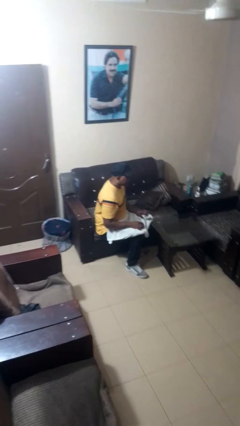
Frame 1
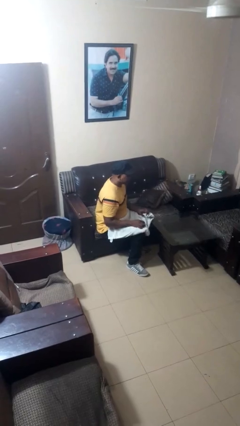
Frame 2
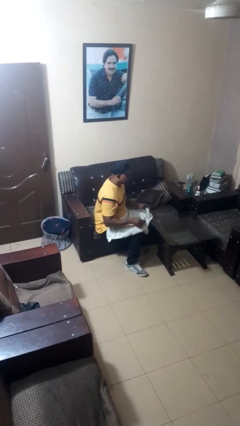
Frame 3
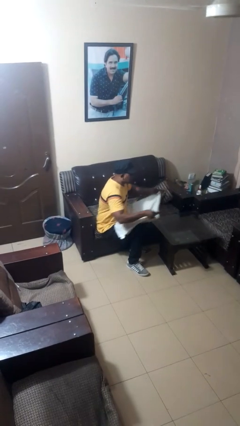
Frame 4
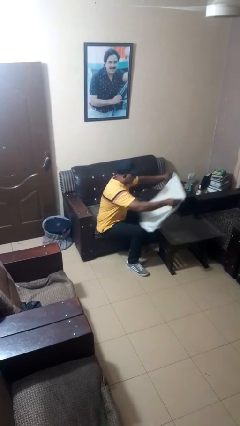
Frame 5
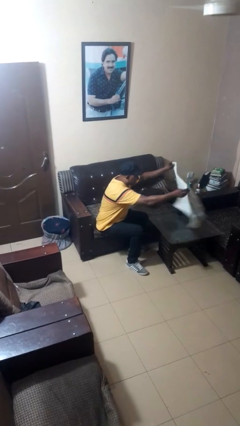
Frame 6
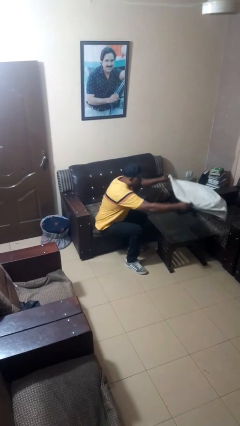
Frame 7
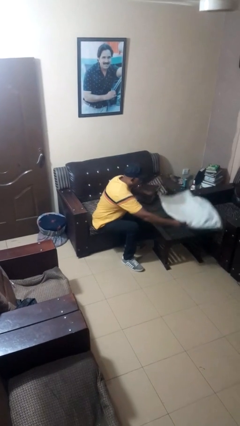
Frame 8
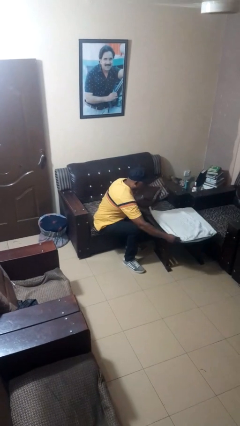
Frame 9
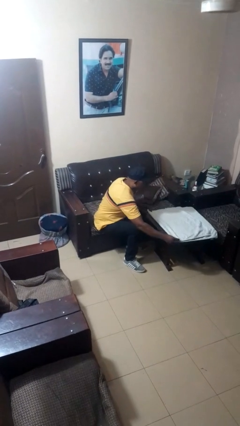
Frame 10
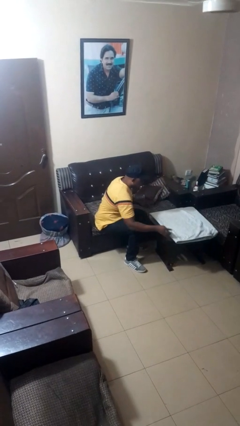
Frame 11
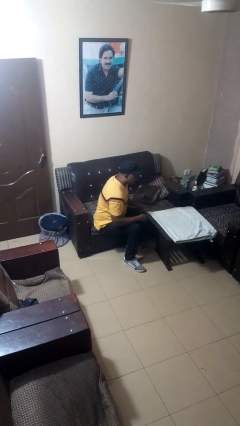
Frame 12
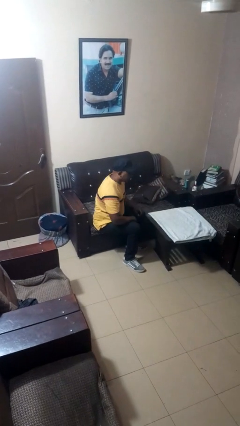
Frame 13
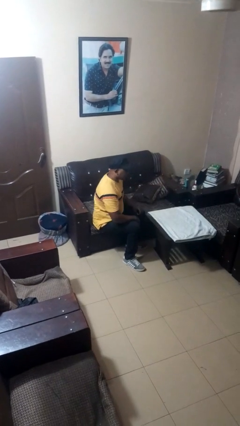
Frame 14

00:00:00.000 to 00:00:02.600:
person spreads tablecloth

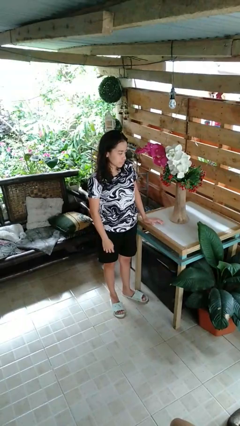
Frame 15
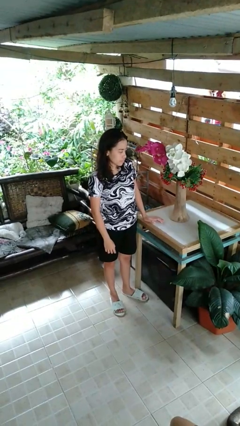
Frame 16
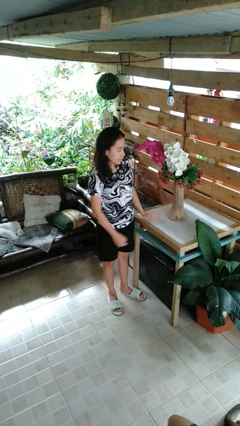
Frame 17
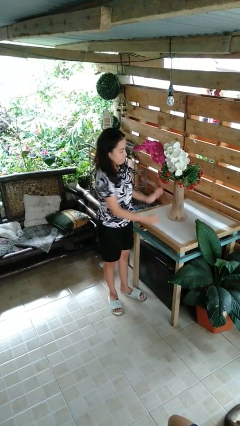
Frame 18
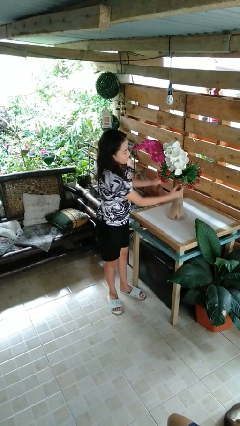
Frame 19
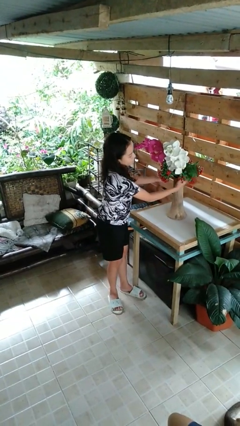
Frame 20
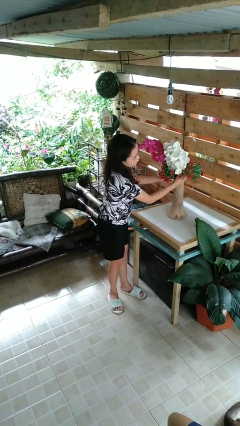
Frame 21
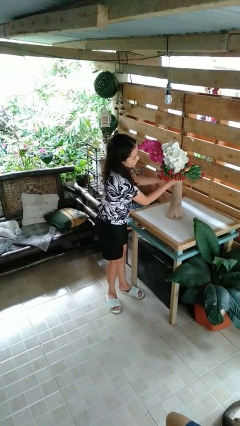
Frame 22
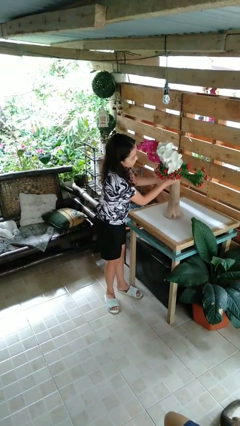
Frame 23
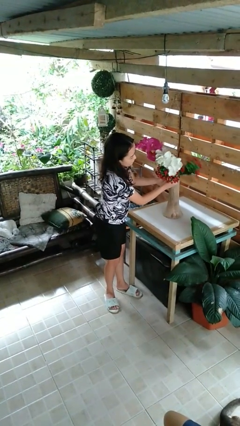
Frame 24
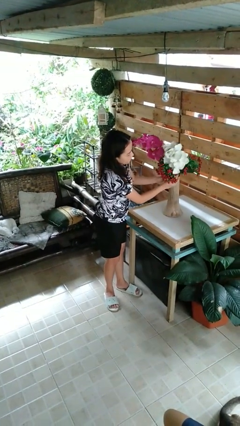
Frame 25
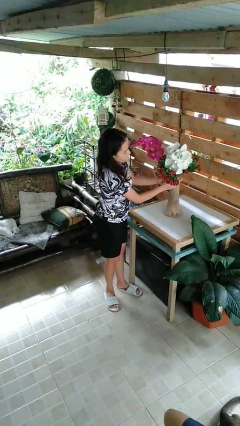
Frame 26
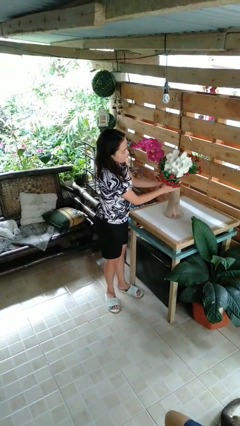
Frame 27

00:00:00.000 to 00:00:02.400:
person arranges flowers in vase

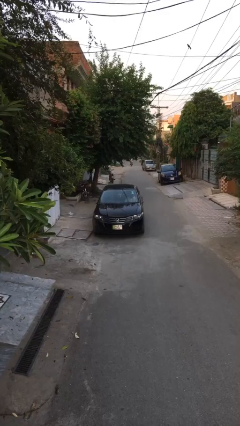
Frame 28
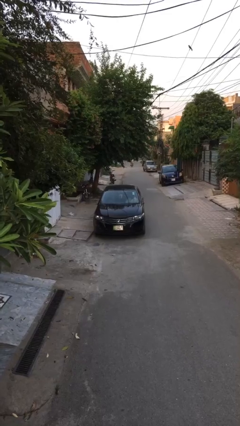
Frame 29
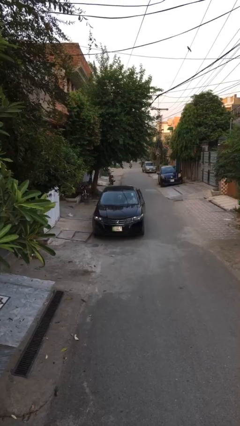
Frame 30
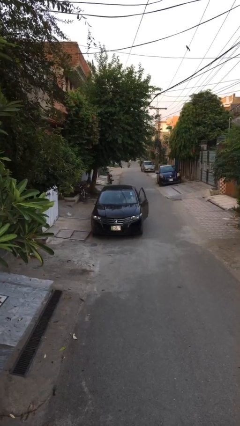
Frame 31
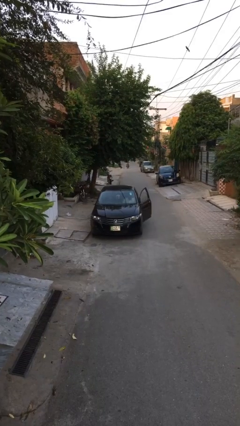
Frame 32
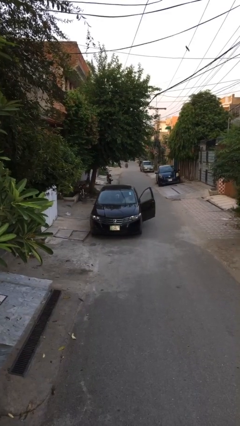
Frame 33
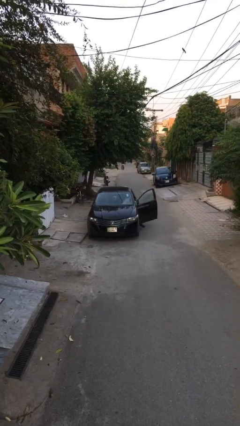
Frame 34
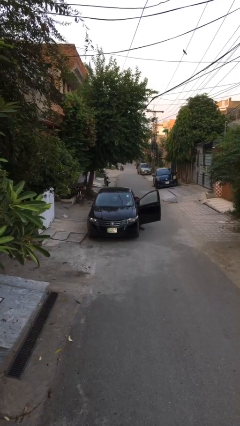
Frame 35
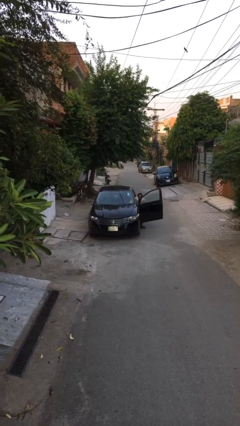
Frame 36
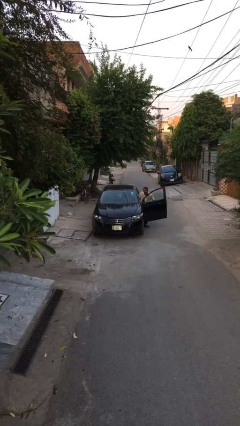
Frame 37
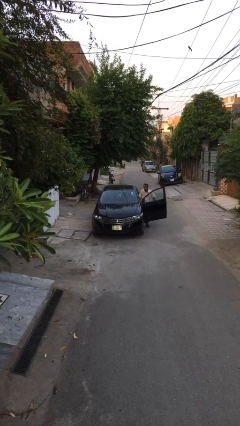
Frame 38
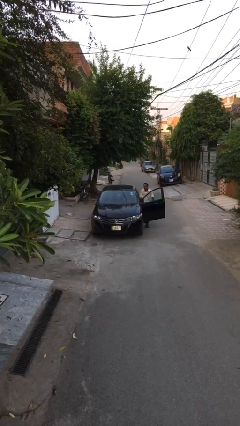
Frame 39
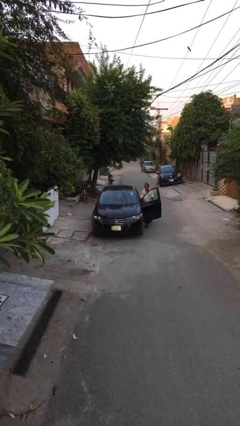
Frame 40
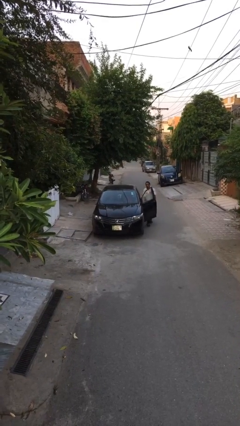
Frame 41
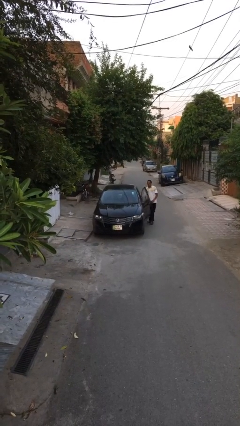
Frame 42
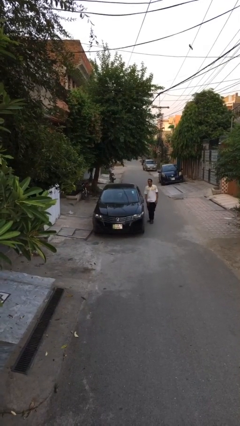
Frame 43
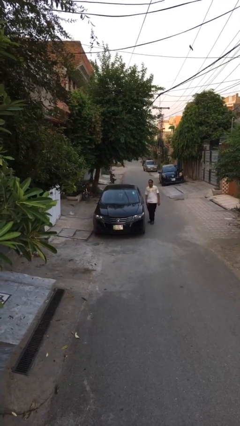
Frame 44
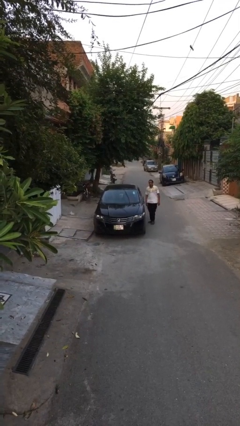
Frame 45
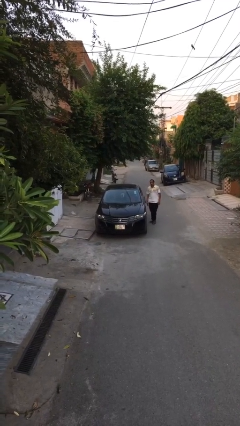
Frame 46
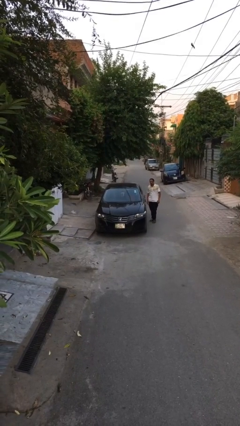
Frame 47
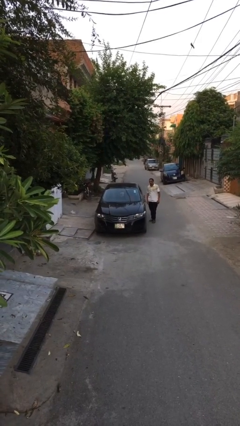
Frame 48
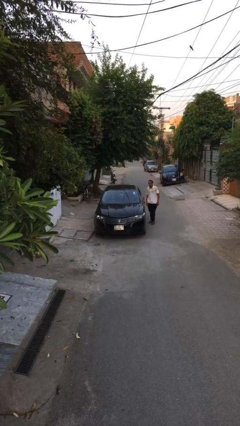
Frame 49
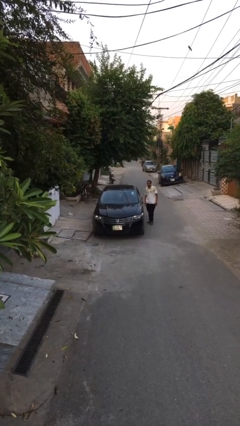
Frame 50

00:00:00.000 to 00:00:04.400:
car drops off person

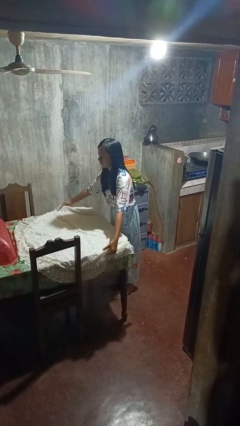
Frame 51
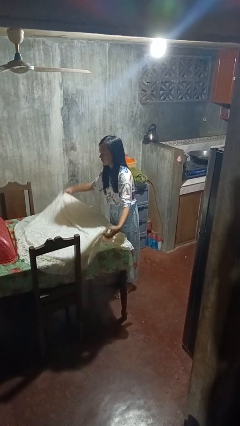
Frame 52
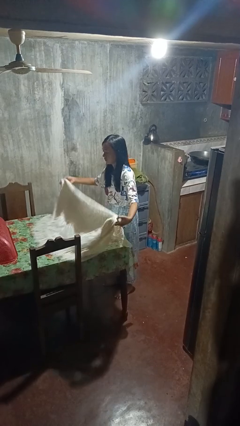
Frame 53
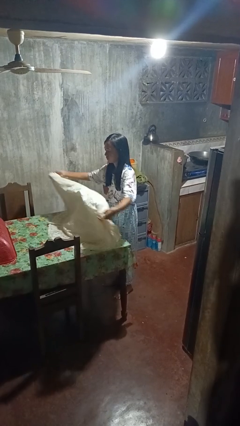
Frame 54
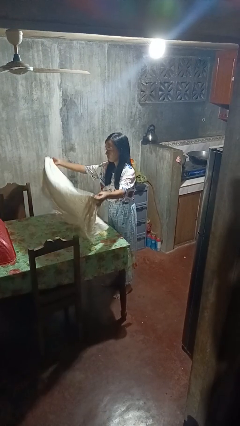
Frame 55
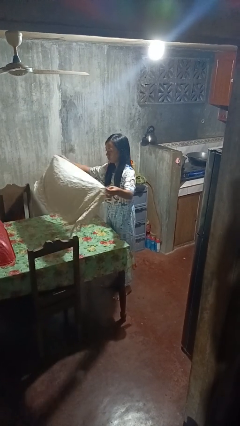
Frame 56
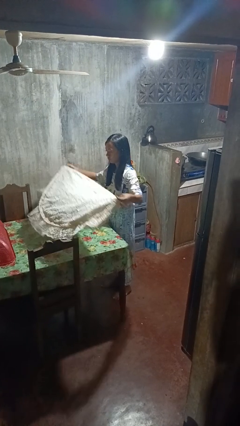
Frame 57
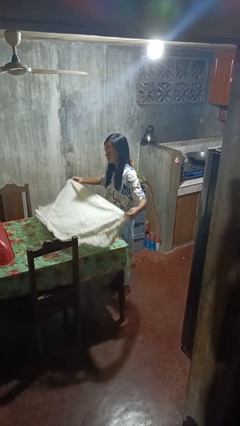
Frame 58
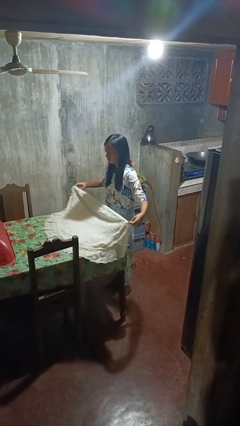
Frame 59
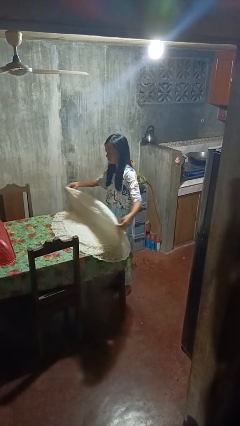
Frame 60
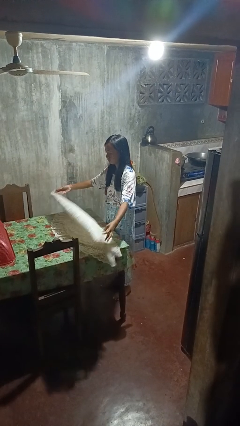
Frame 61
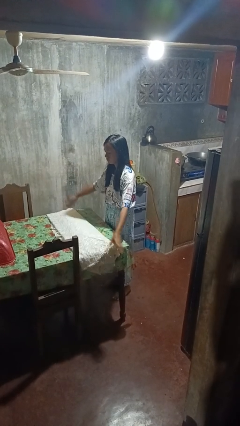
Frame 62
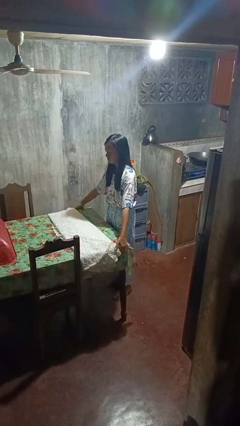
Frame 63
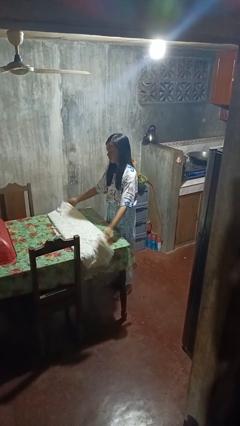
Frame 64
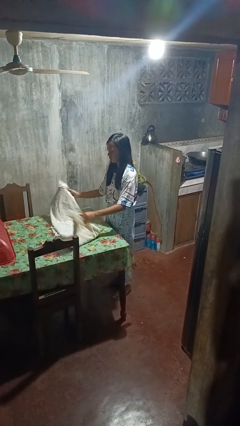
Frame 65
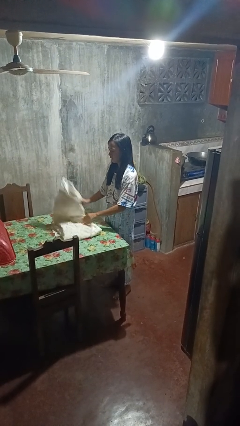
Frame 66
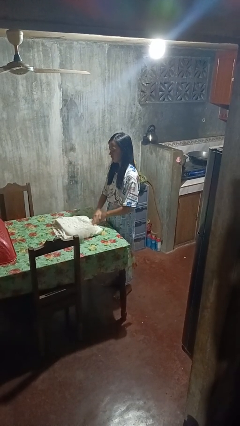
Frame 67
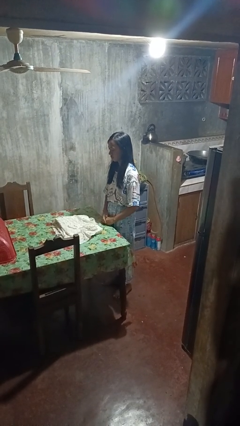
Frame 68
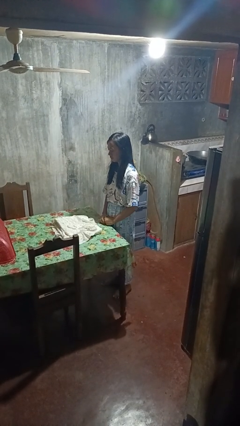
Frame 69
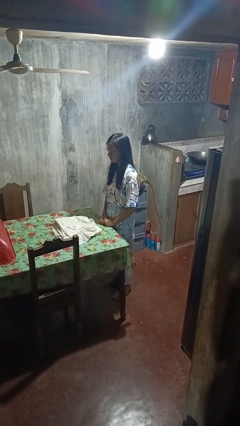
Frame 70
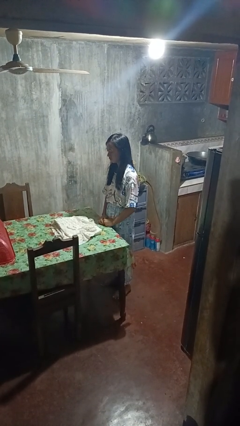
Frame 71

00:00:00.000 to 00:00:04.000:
person folds tablecloth

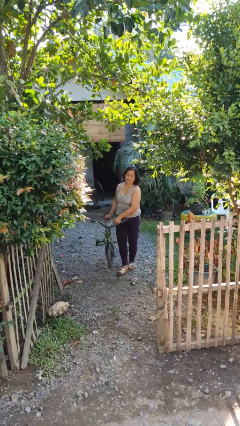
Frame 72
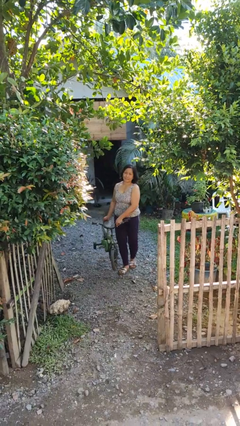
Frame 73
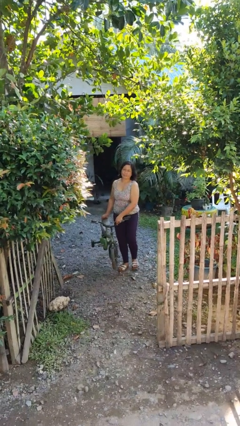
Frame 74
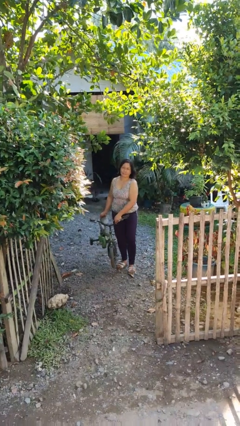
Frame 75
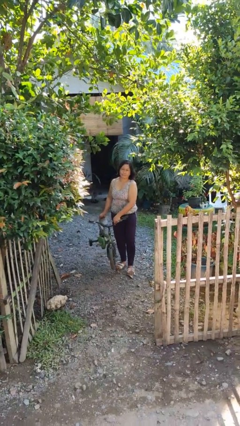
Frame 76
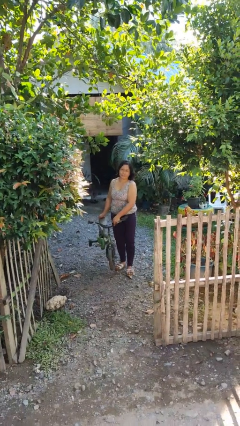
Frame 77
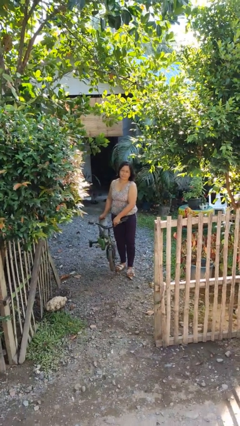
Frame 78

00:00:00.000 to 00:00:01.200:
person carries bicycle

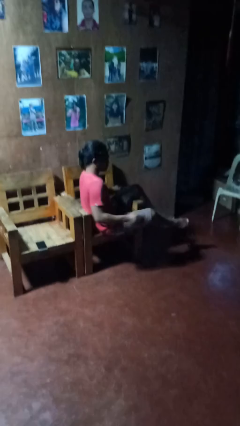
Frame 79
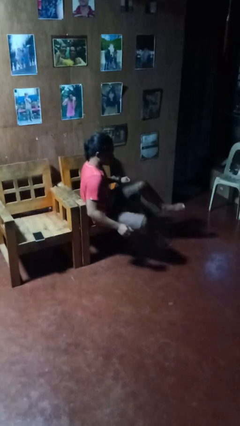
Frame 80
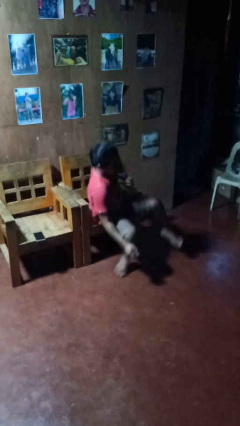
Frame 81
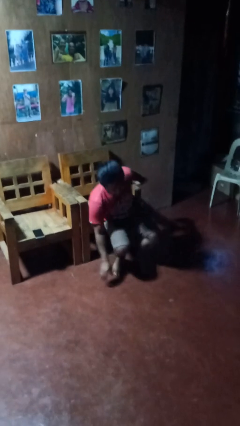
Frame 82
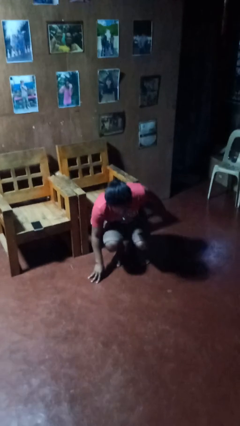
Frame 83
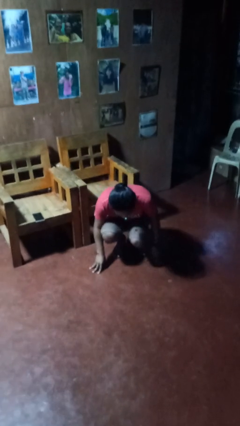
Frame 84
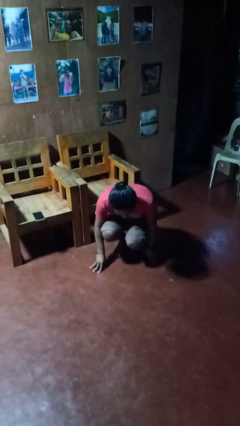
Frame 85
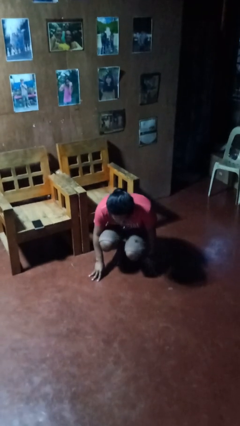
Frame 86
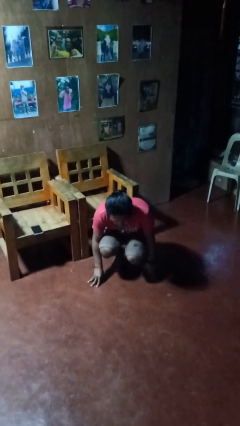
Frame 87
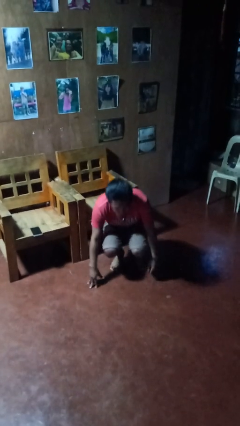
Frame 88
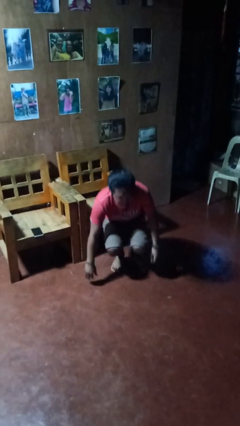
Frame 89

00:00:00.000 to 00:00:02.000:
person falls from chair

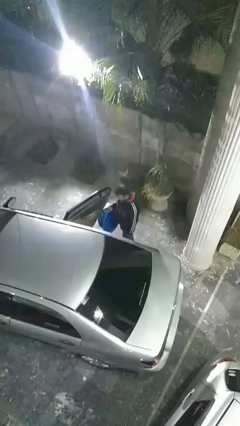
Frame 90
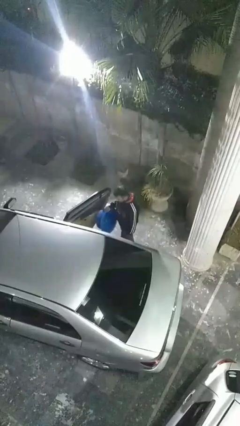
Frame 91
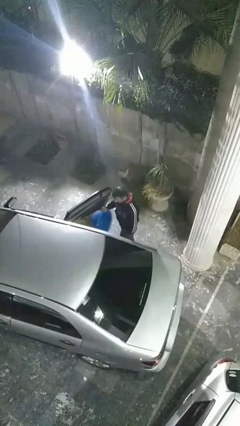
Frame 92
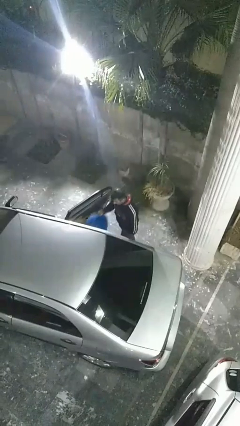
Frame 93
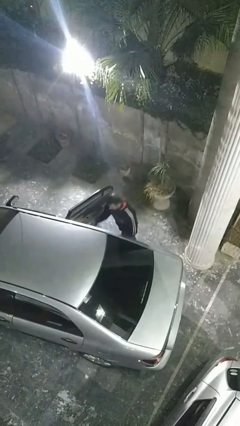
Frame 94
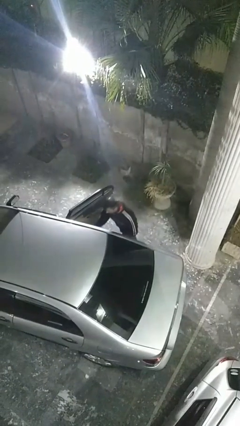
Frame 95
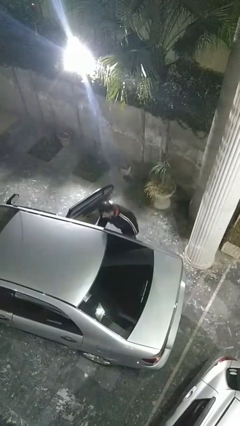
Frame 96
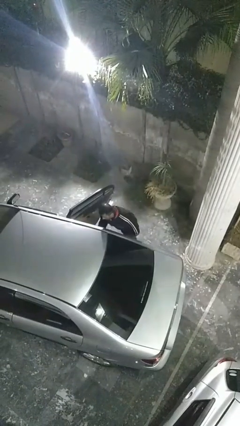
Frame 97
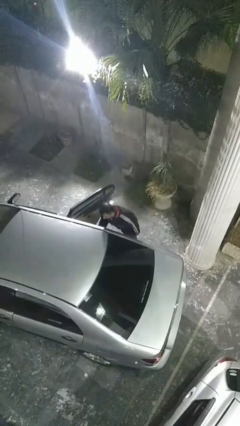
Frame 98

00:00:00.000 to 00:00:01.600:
person loads car
